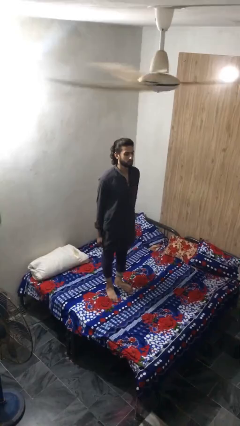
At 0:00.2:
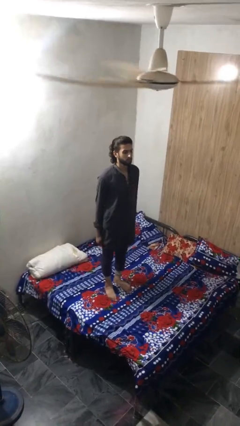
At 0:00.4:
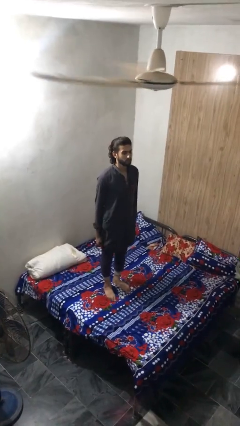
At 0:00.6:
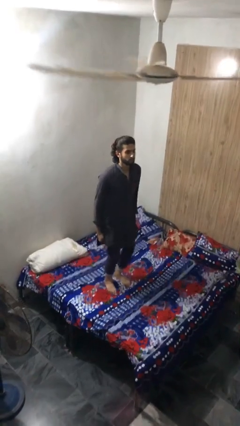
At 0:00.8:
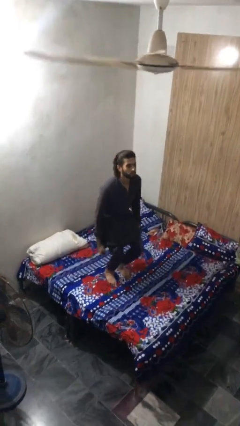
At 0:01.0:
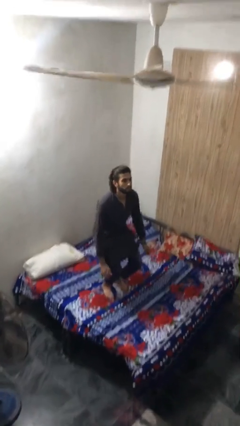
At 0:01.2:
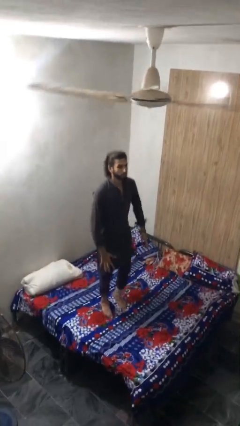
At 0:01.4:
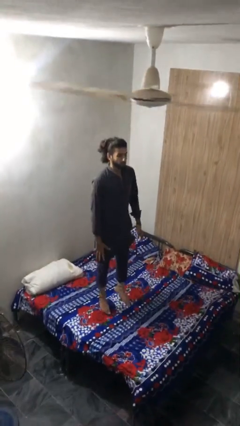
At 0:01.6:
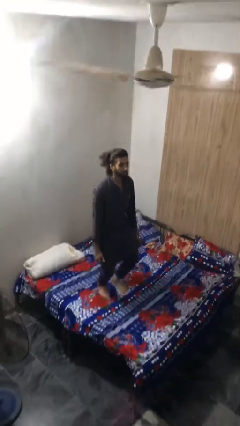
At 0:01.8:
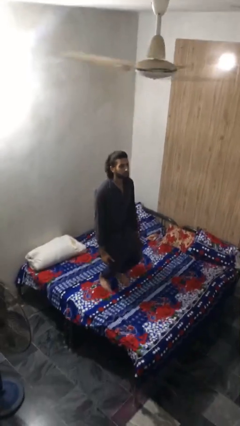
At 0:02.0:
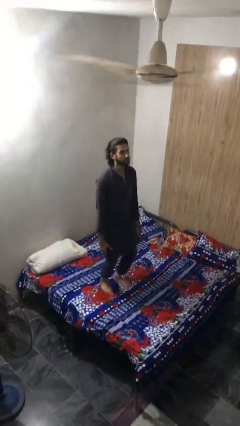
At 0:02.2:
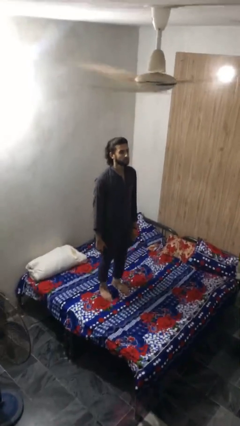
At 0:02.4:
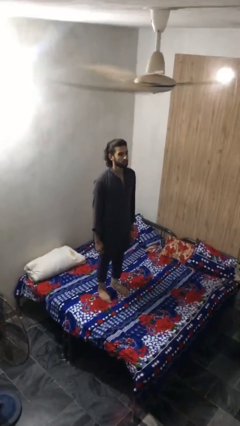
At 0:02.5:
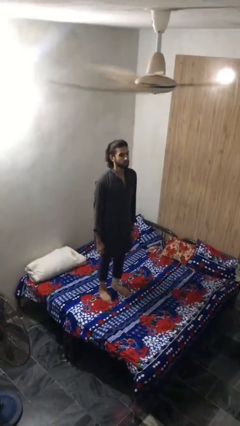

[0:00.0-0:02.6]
person jumps on bed

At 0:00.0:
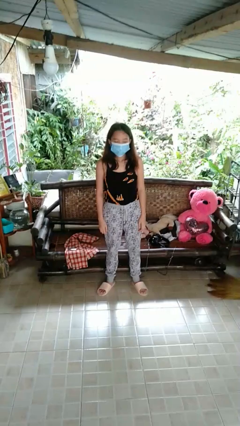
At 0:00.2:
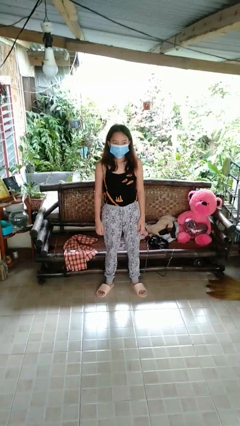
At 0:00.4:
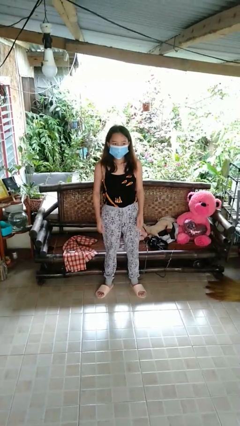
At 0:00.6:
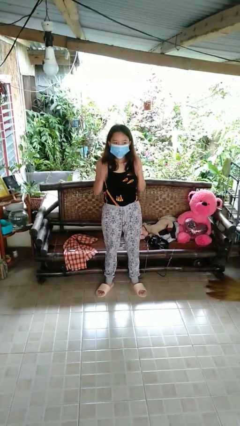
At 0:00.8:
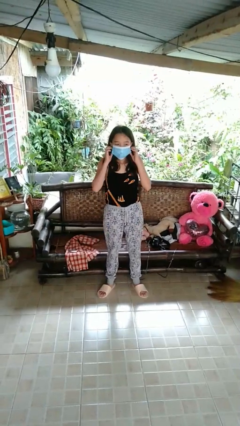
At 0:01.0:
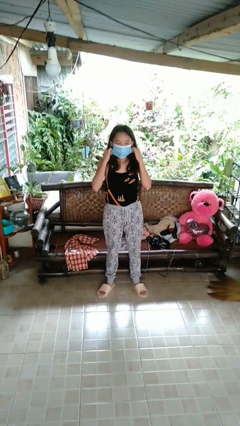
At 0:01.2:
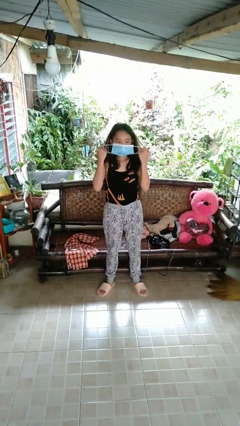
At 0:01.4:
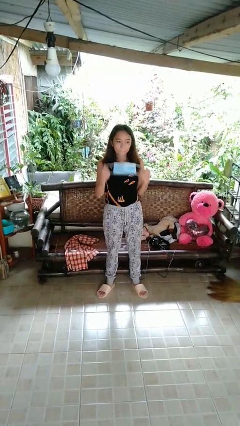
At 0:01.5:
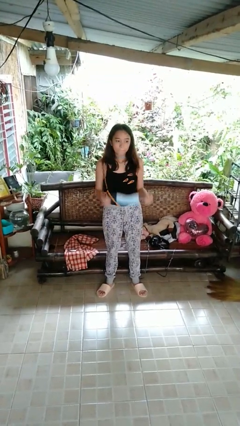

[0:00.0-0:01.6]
person takes off facemask

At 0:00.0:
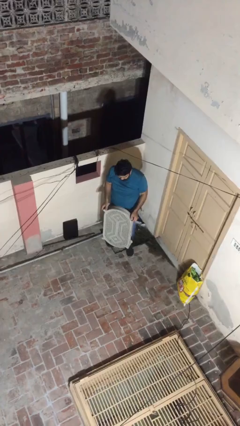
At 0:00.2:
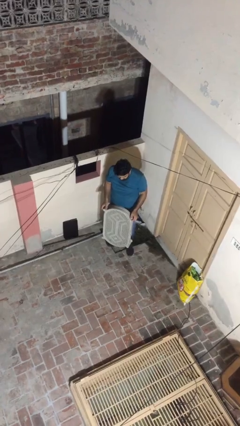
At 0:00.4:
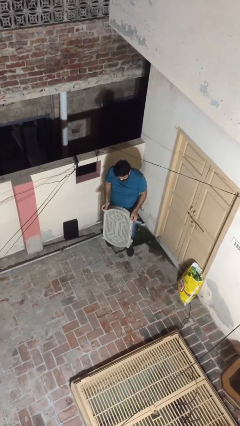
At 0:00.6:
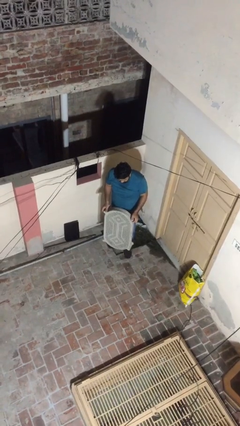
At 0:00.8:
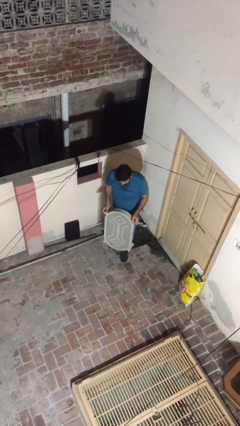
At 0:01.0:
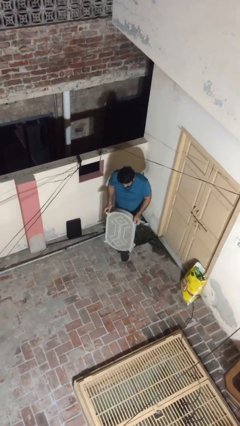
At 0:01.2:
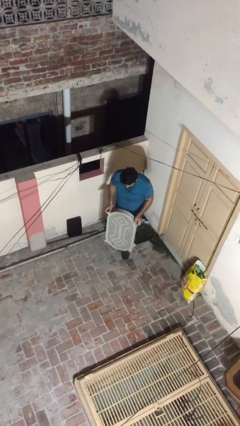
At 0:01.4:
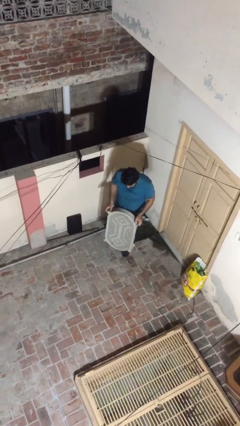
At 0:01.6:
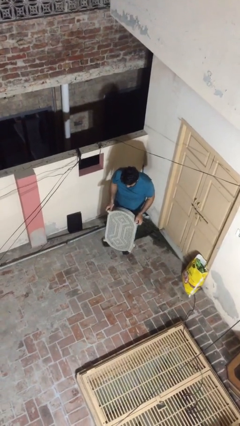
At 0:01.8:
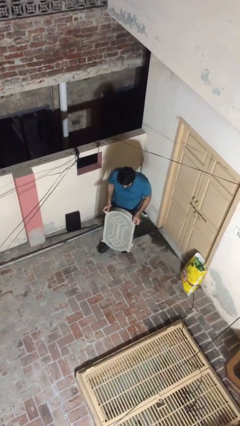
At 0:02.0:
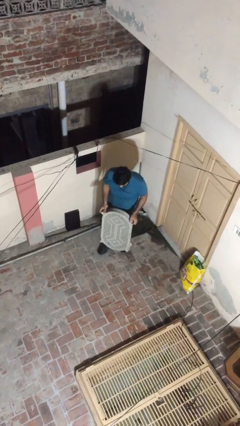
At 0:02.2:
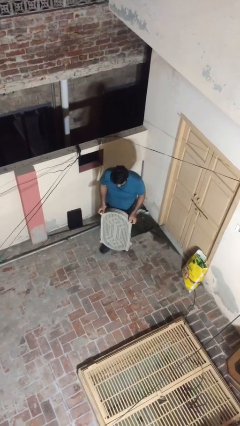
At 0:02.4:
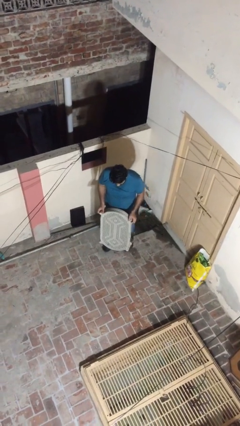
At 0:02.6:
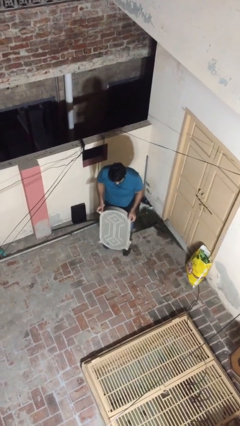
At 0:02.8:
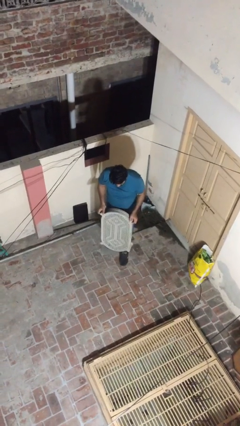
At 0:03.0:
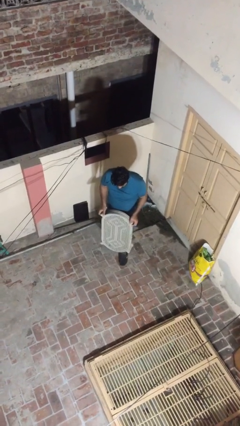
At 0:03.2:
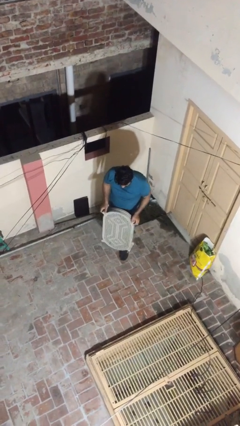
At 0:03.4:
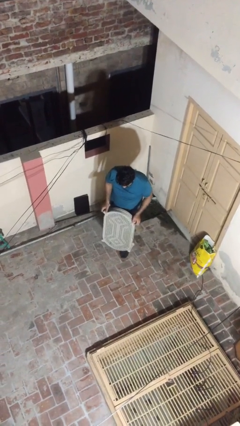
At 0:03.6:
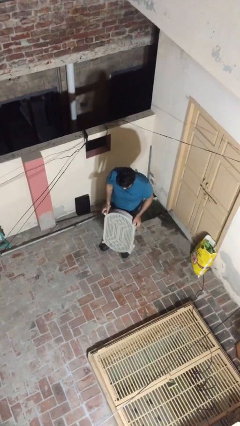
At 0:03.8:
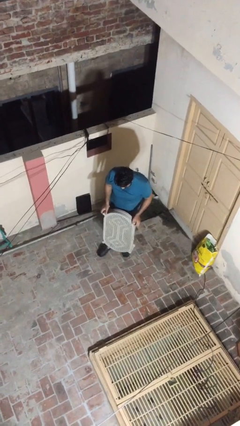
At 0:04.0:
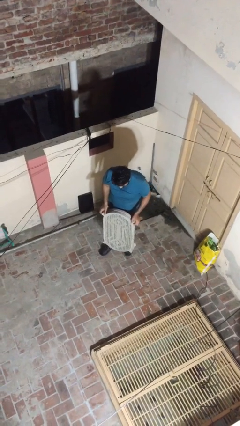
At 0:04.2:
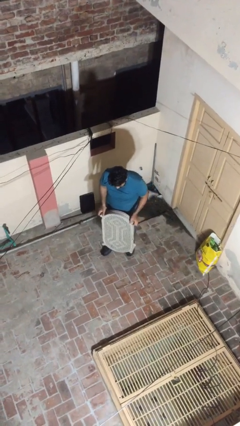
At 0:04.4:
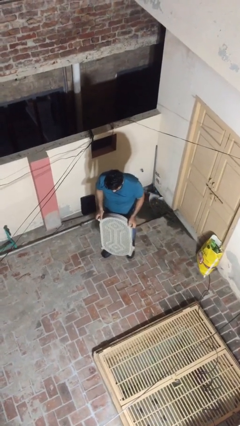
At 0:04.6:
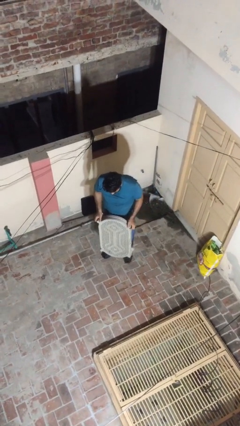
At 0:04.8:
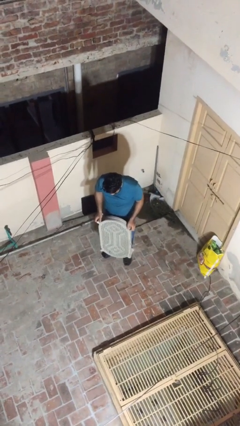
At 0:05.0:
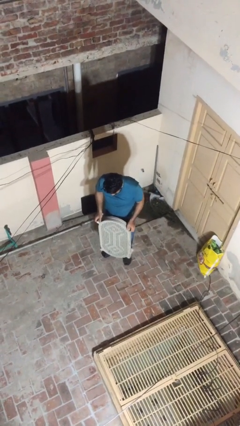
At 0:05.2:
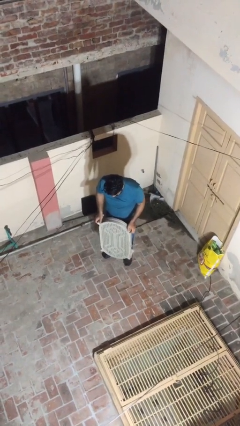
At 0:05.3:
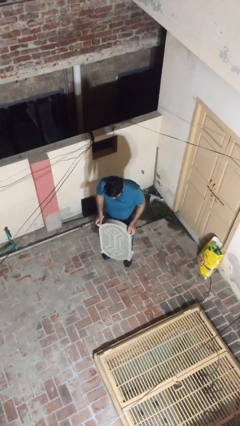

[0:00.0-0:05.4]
person carries heavy object

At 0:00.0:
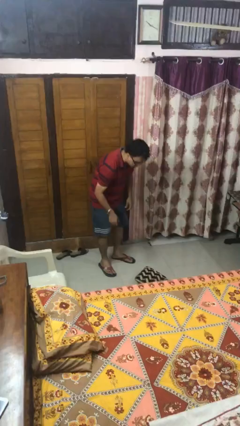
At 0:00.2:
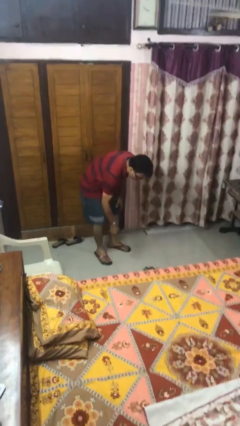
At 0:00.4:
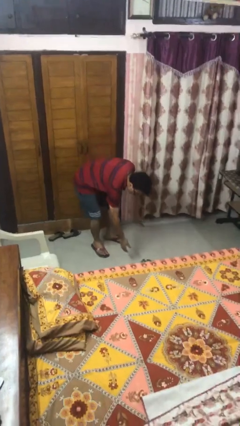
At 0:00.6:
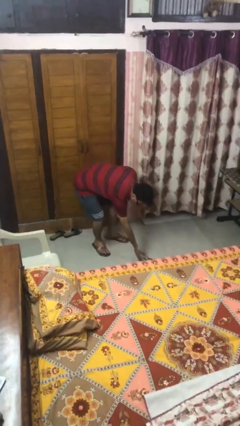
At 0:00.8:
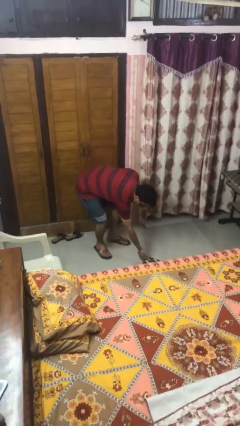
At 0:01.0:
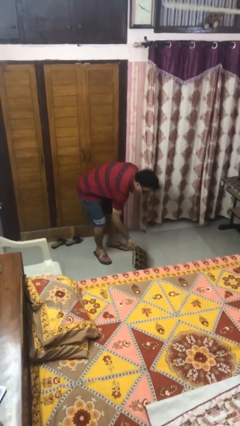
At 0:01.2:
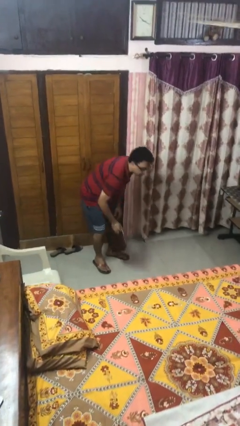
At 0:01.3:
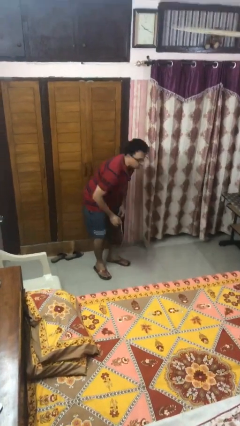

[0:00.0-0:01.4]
person picks up object from floor

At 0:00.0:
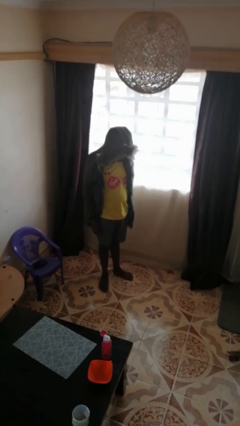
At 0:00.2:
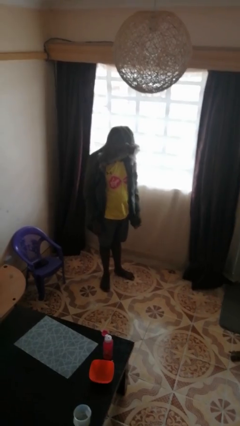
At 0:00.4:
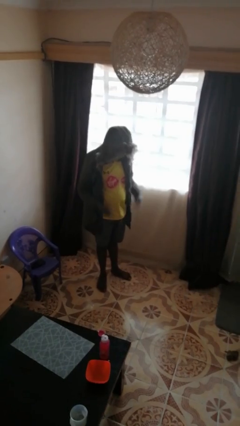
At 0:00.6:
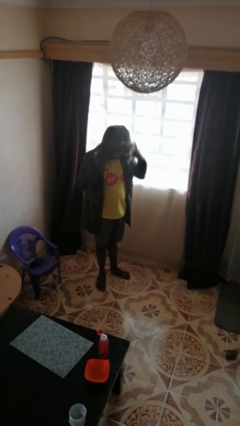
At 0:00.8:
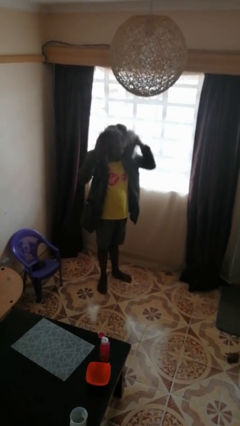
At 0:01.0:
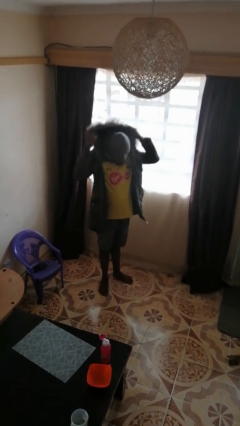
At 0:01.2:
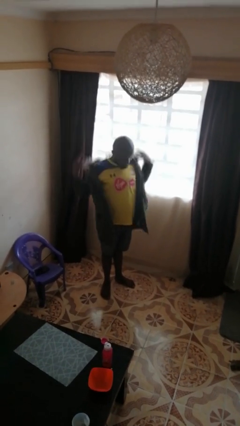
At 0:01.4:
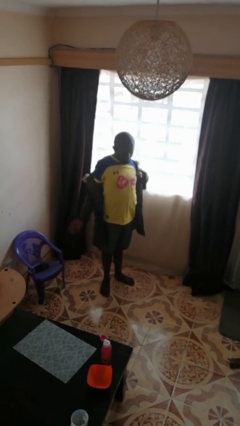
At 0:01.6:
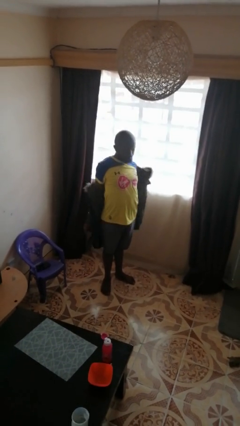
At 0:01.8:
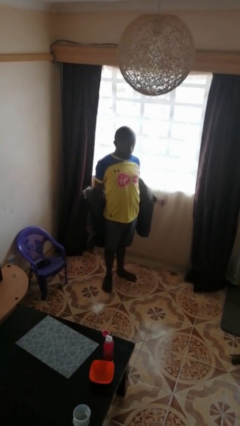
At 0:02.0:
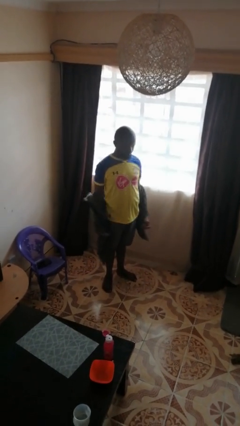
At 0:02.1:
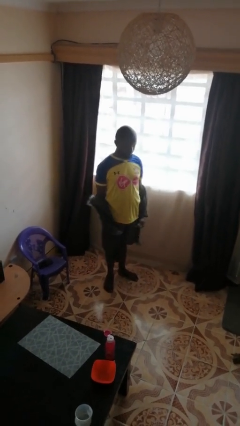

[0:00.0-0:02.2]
person takes off hoodie

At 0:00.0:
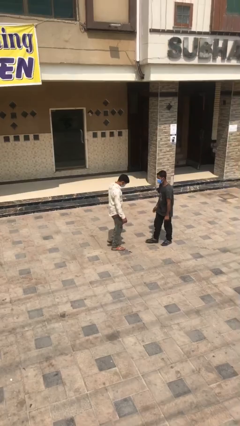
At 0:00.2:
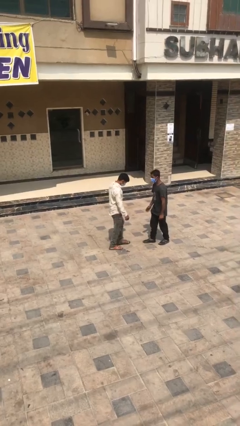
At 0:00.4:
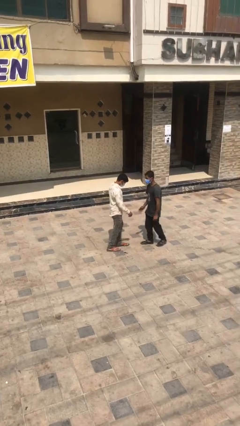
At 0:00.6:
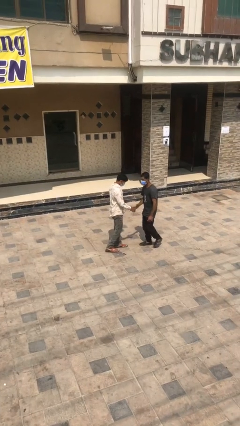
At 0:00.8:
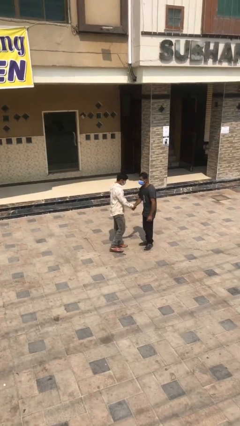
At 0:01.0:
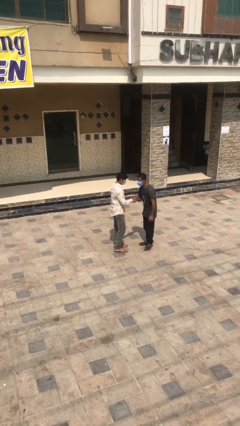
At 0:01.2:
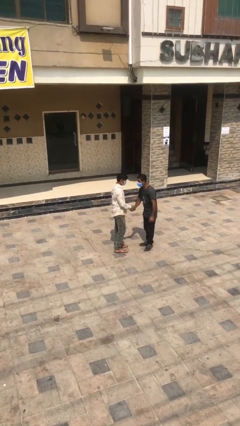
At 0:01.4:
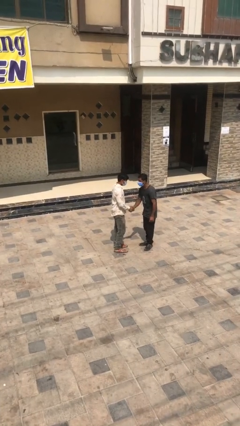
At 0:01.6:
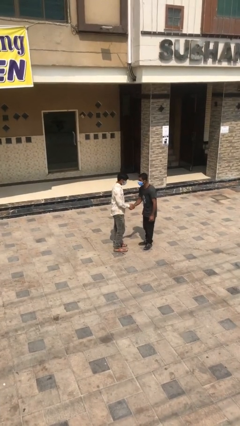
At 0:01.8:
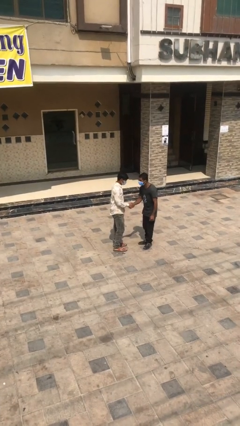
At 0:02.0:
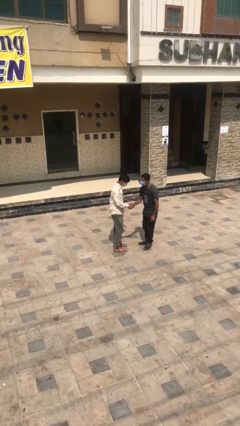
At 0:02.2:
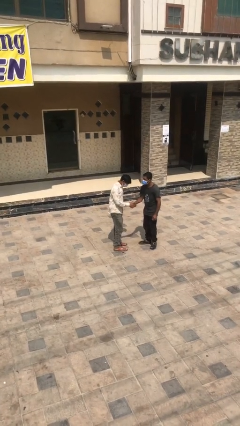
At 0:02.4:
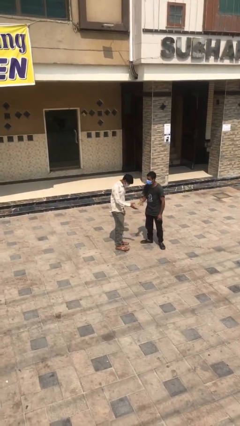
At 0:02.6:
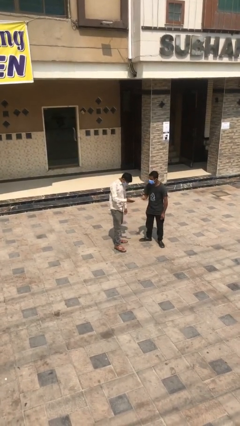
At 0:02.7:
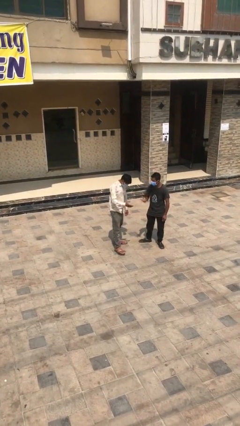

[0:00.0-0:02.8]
person shakes hand

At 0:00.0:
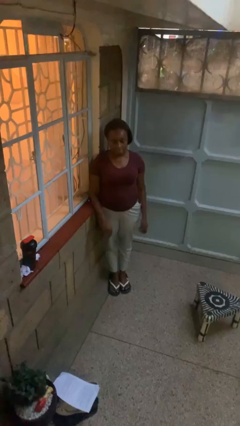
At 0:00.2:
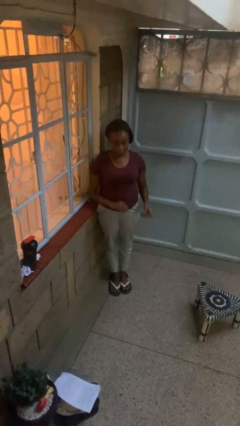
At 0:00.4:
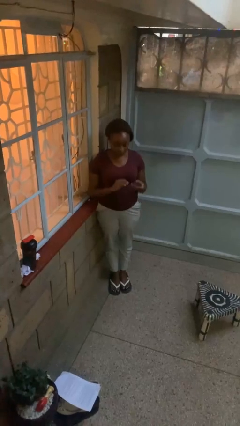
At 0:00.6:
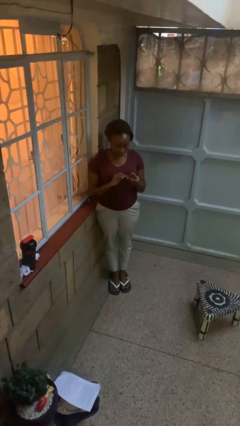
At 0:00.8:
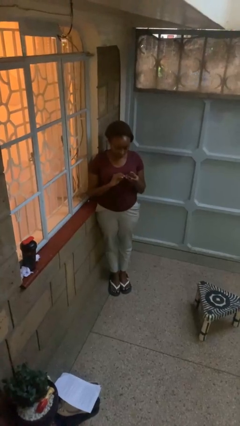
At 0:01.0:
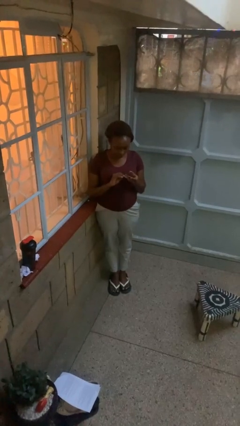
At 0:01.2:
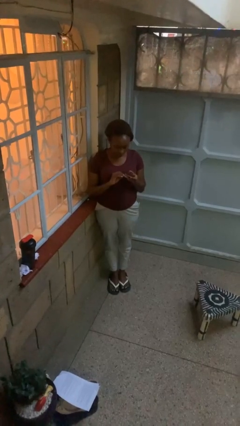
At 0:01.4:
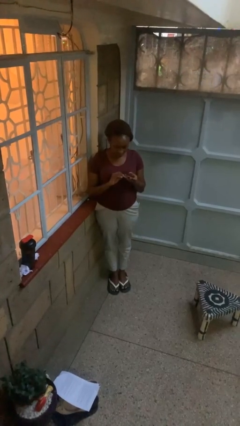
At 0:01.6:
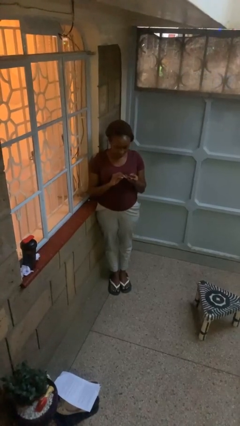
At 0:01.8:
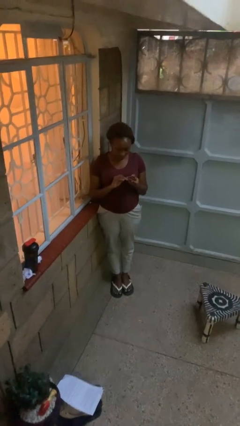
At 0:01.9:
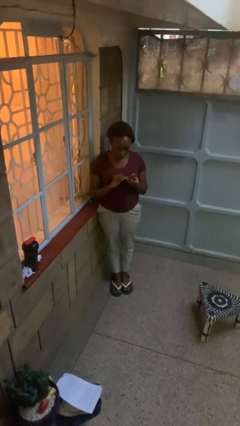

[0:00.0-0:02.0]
person clips fingernails
